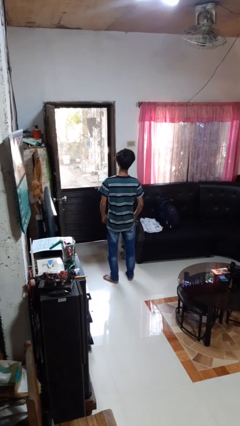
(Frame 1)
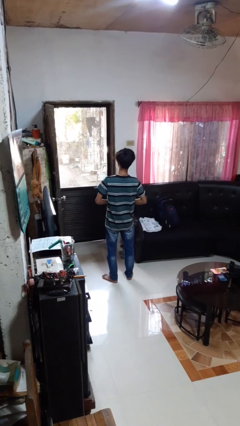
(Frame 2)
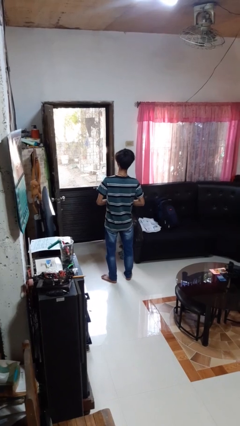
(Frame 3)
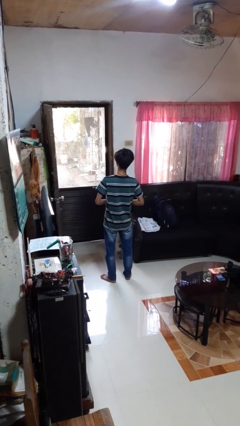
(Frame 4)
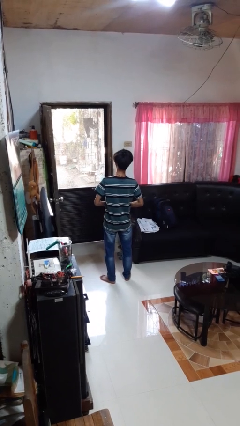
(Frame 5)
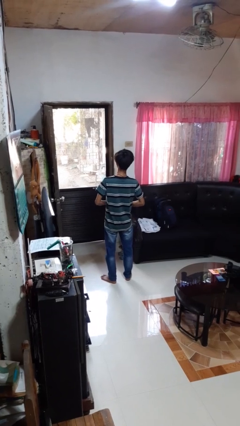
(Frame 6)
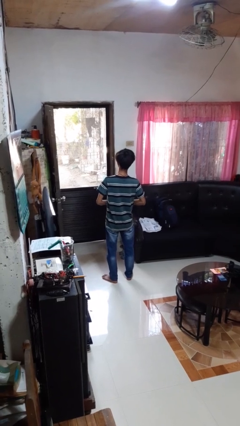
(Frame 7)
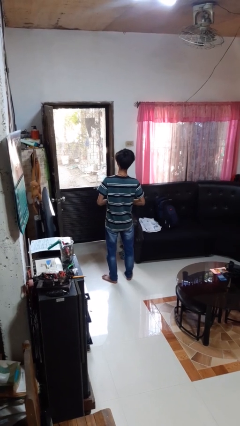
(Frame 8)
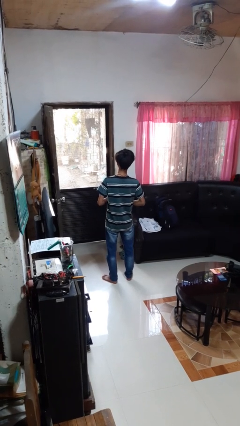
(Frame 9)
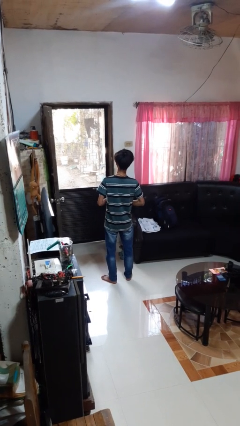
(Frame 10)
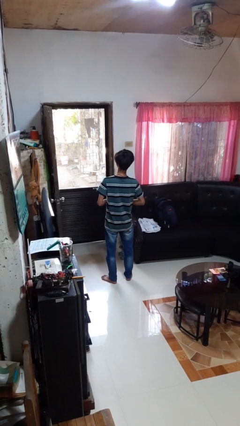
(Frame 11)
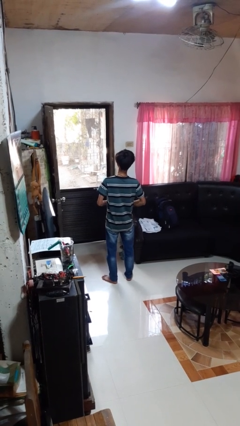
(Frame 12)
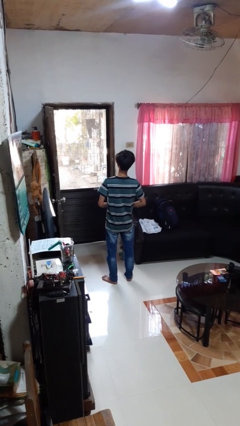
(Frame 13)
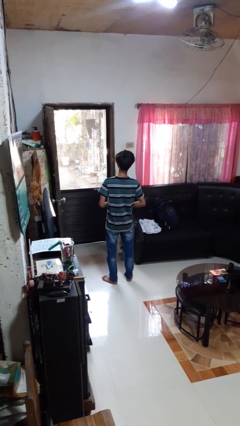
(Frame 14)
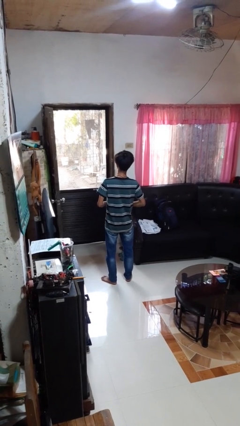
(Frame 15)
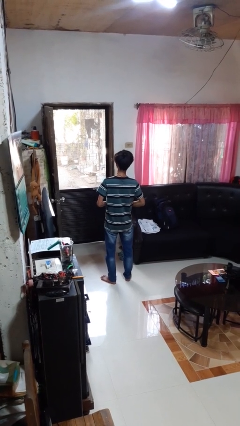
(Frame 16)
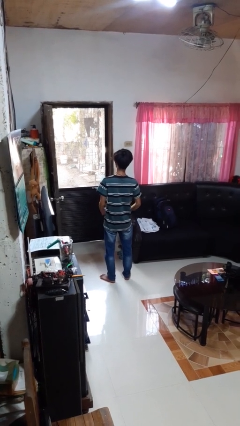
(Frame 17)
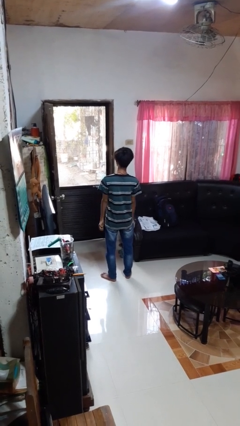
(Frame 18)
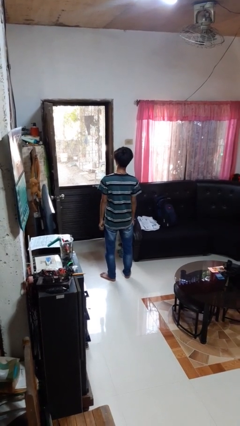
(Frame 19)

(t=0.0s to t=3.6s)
person buttons shirt

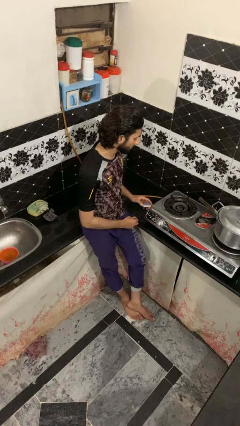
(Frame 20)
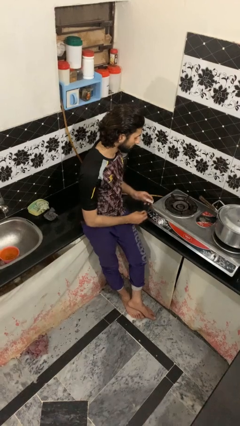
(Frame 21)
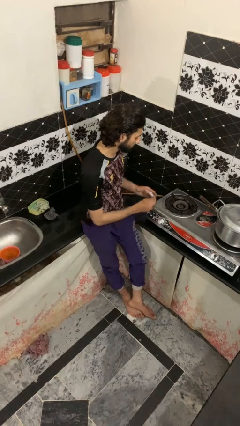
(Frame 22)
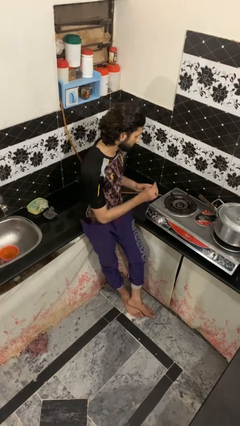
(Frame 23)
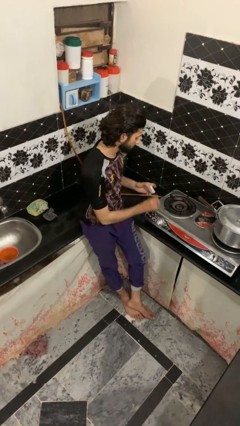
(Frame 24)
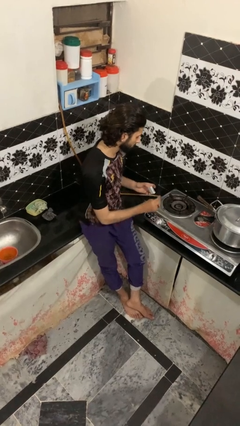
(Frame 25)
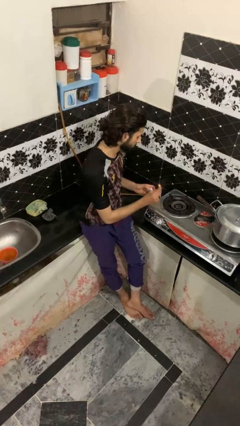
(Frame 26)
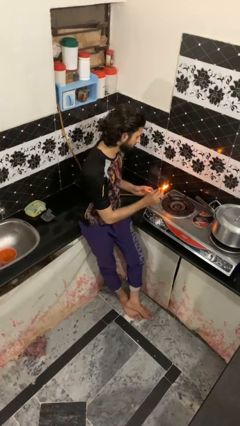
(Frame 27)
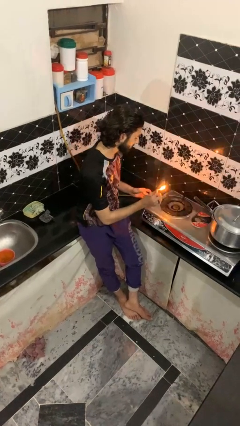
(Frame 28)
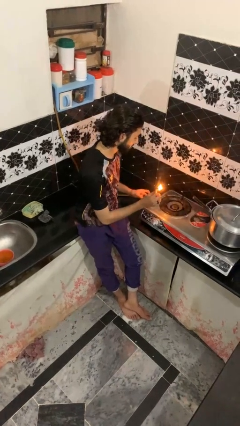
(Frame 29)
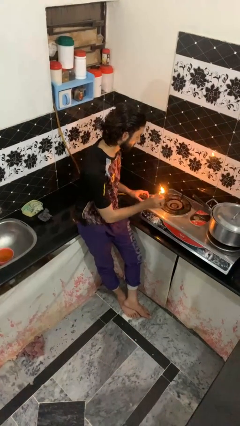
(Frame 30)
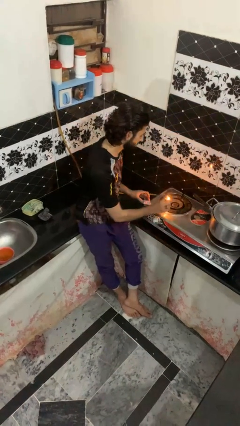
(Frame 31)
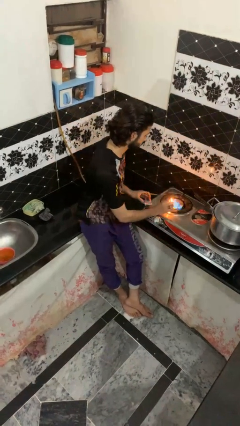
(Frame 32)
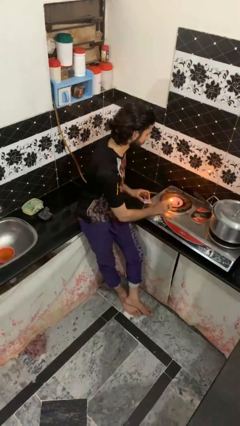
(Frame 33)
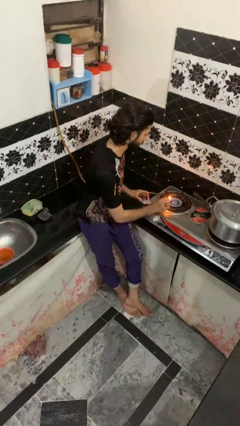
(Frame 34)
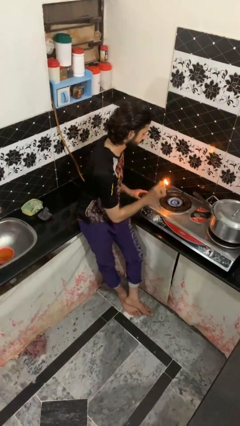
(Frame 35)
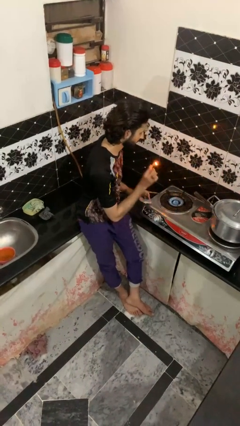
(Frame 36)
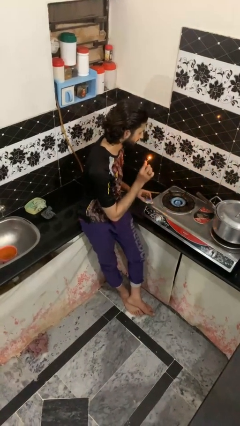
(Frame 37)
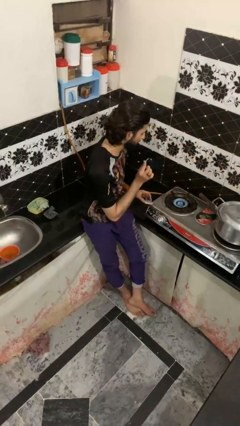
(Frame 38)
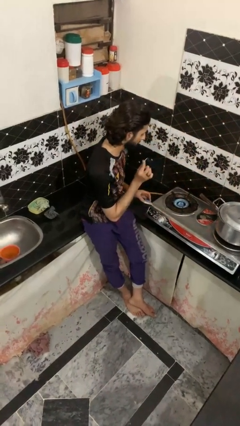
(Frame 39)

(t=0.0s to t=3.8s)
person turns on stovetop

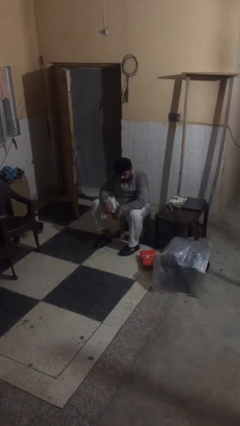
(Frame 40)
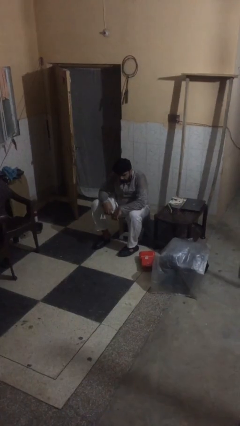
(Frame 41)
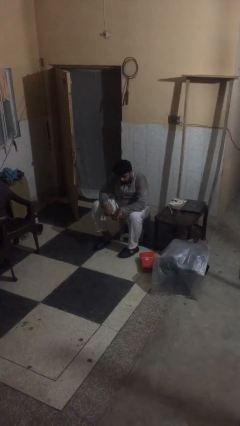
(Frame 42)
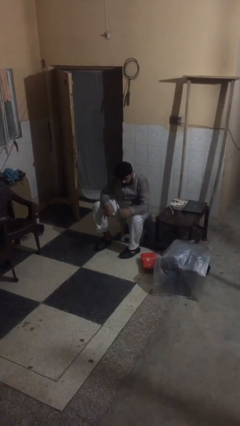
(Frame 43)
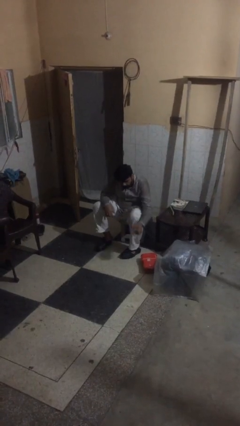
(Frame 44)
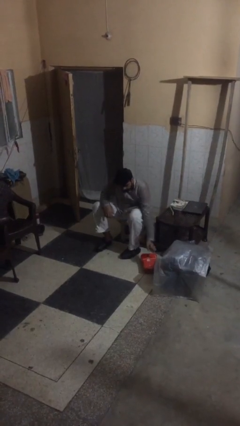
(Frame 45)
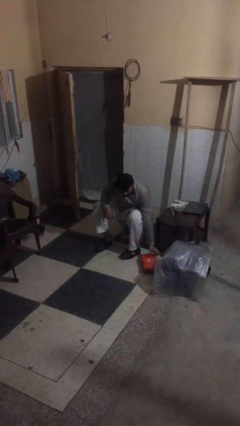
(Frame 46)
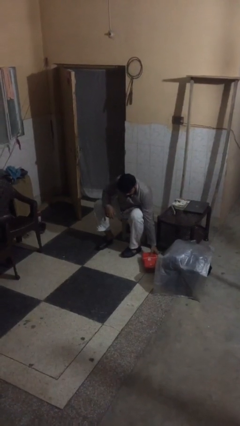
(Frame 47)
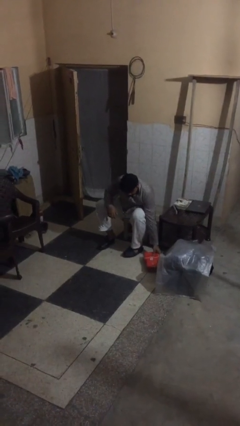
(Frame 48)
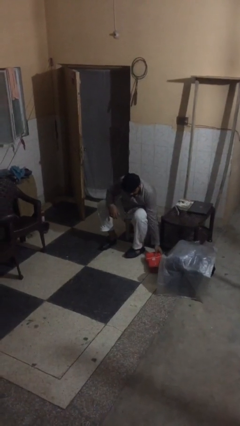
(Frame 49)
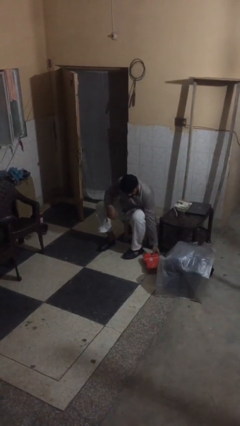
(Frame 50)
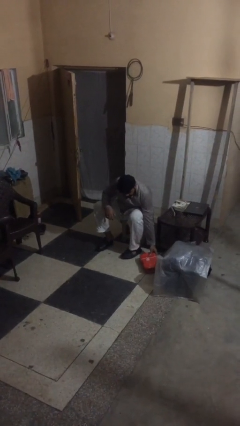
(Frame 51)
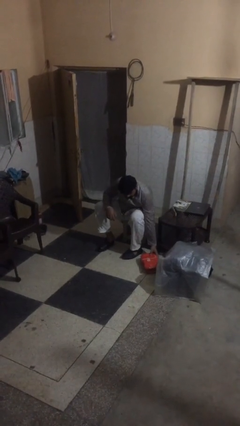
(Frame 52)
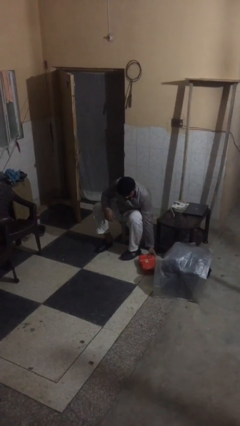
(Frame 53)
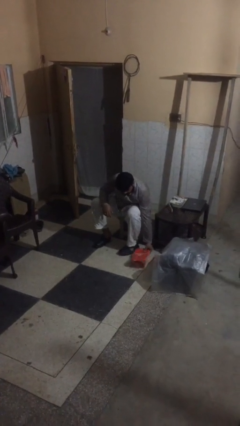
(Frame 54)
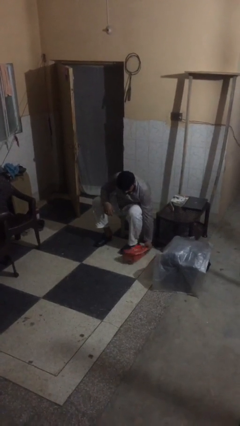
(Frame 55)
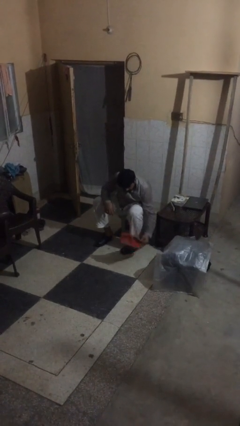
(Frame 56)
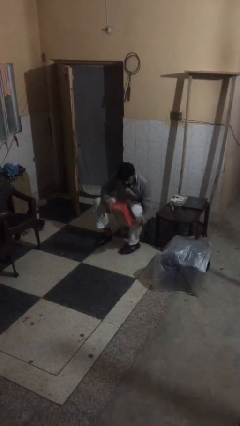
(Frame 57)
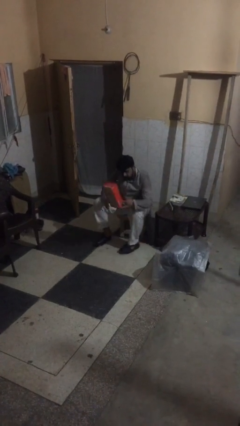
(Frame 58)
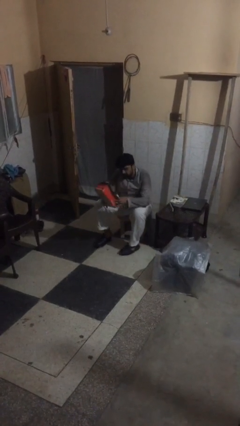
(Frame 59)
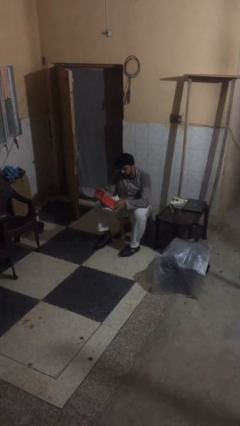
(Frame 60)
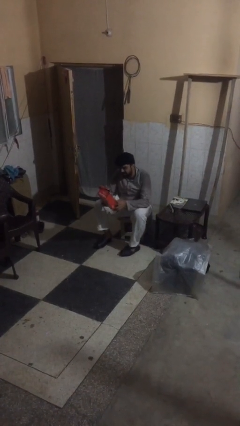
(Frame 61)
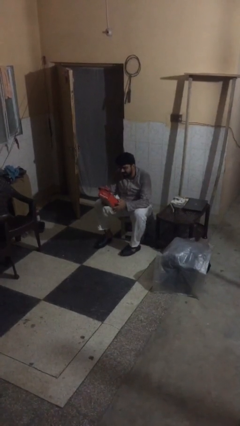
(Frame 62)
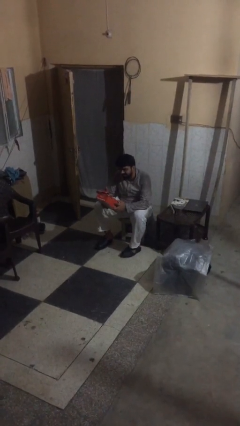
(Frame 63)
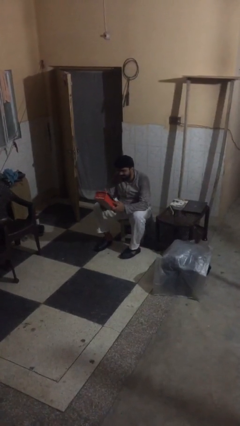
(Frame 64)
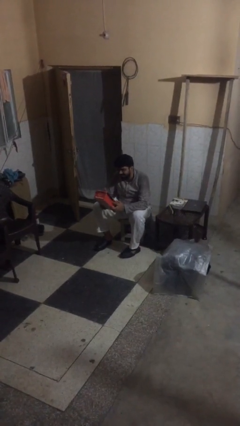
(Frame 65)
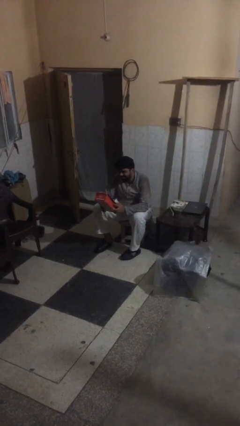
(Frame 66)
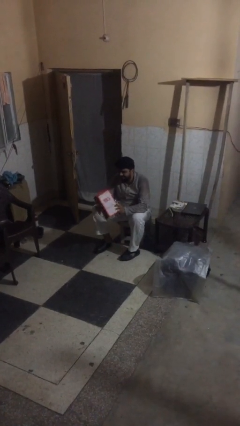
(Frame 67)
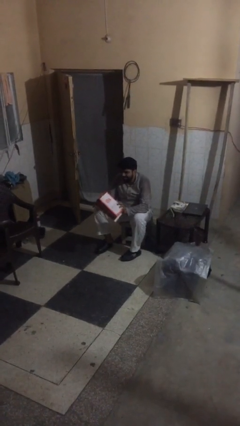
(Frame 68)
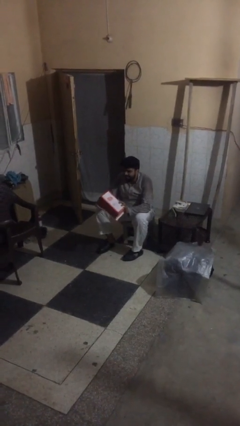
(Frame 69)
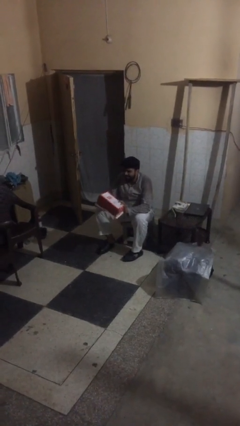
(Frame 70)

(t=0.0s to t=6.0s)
person picks up object from floor

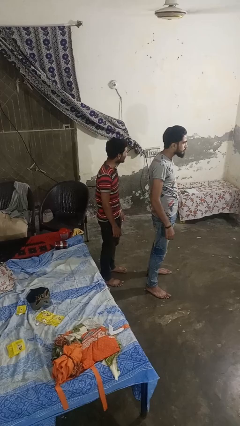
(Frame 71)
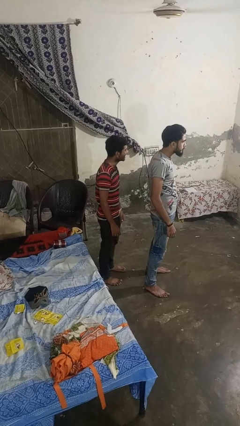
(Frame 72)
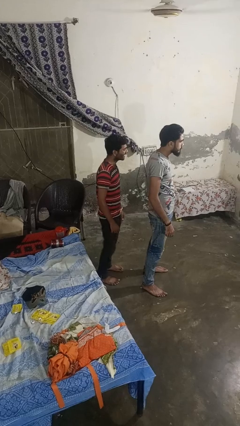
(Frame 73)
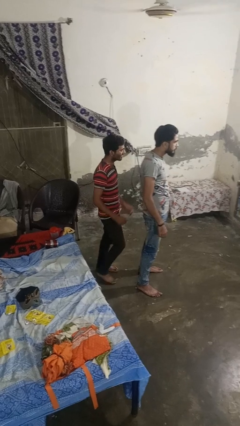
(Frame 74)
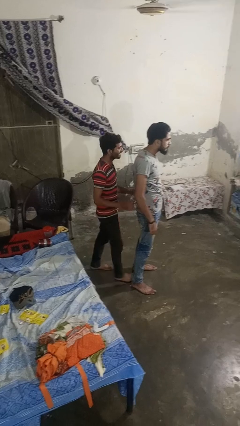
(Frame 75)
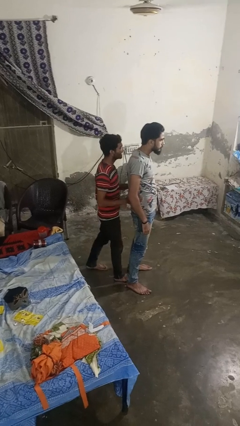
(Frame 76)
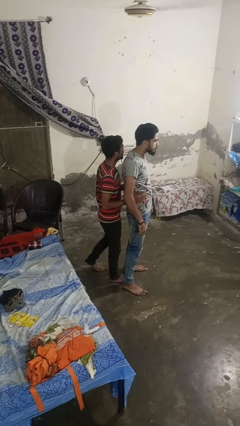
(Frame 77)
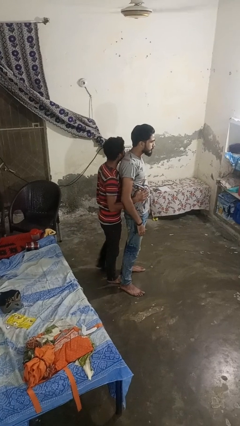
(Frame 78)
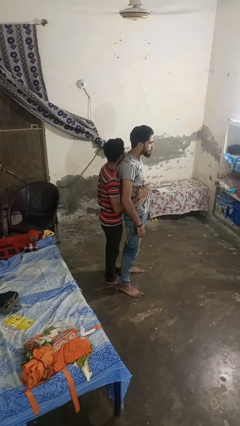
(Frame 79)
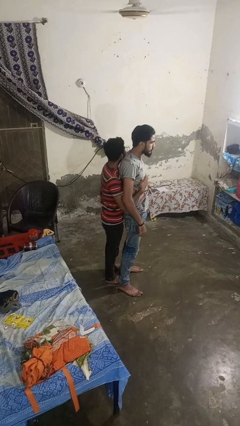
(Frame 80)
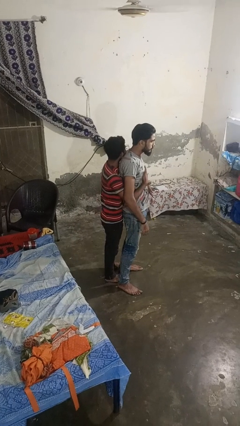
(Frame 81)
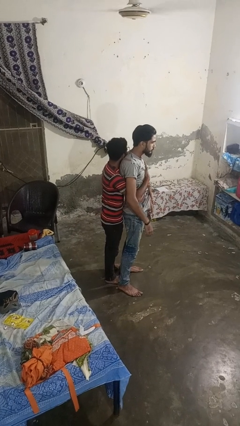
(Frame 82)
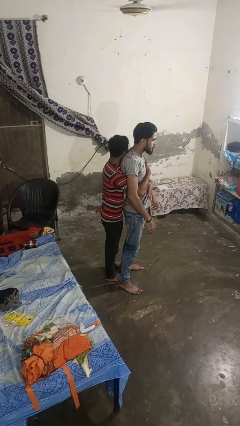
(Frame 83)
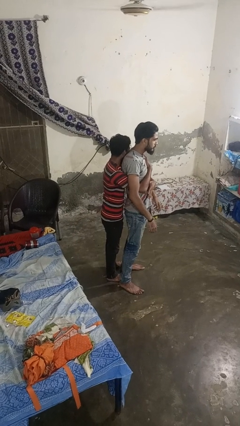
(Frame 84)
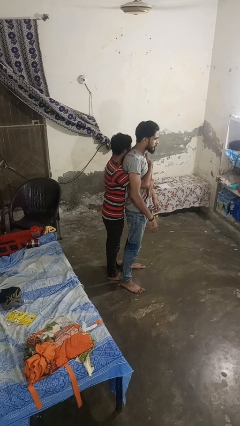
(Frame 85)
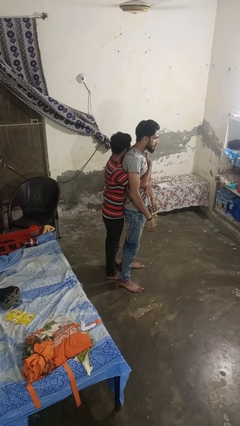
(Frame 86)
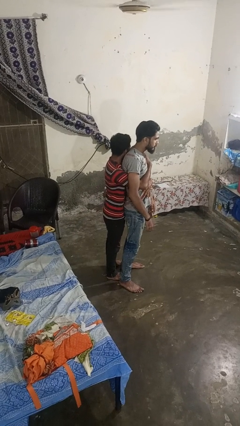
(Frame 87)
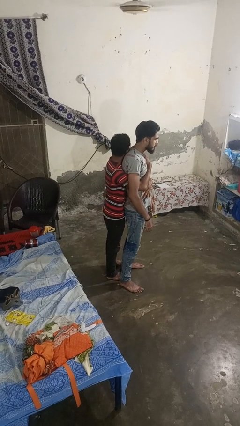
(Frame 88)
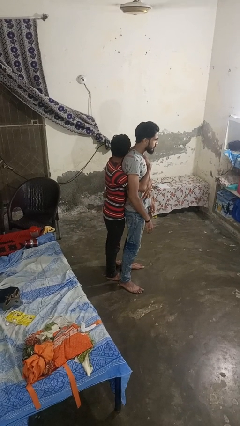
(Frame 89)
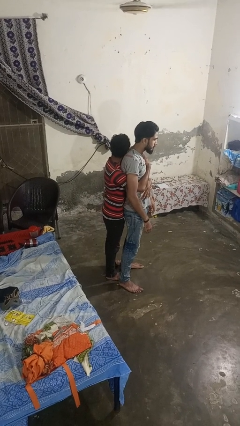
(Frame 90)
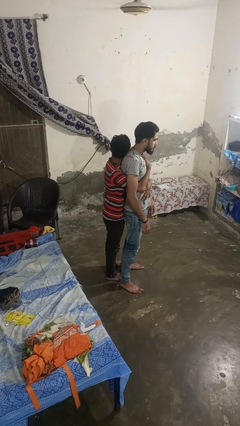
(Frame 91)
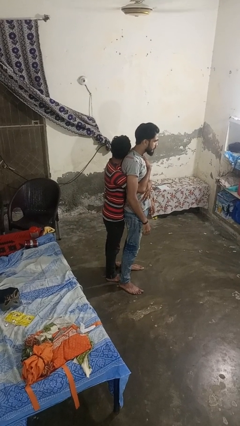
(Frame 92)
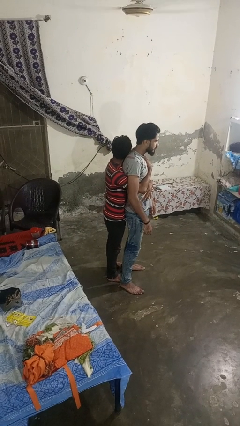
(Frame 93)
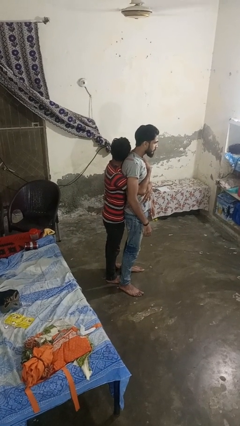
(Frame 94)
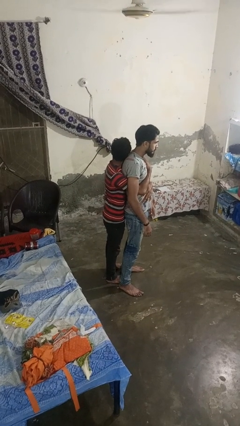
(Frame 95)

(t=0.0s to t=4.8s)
person hugs person from behind
